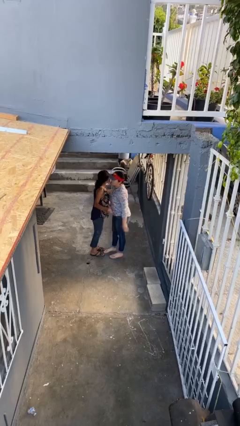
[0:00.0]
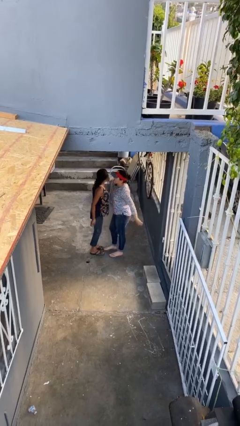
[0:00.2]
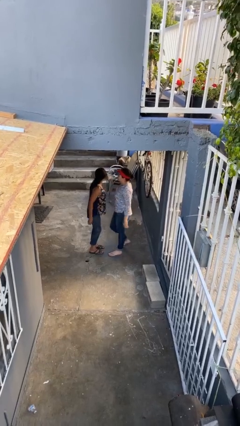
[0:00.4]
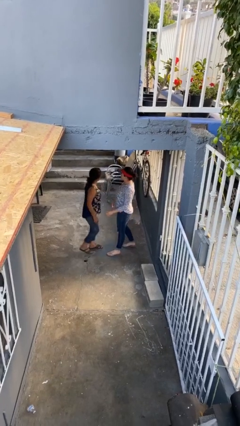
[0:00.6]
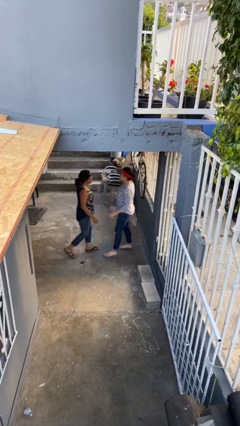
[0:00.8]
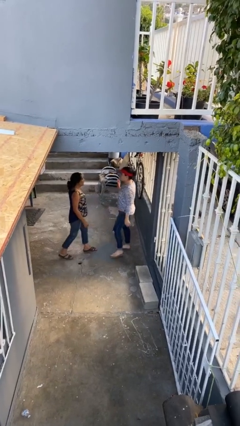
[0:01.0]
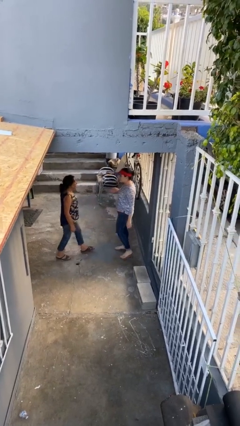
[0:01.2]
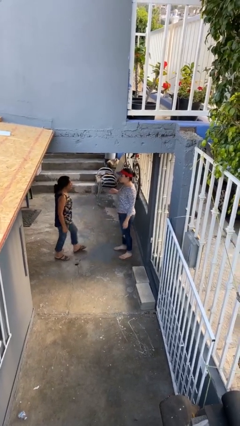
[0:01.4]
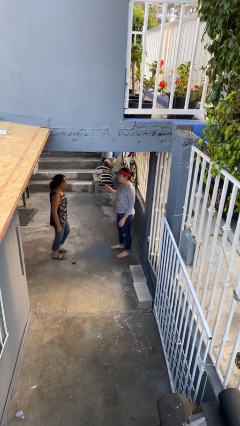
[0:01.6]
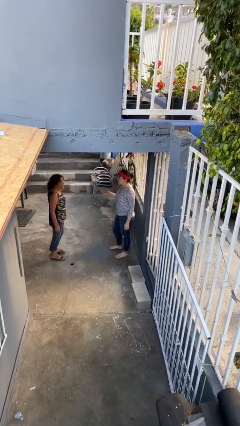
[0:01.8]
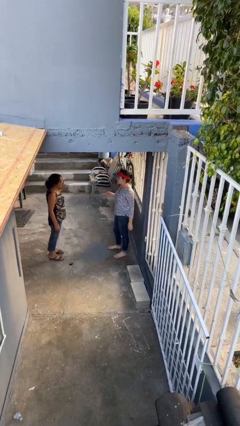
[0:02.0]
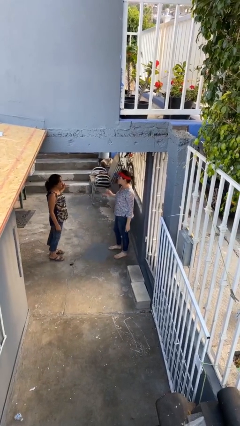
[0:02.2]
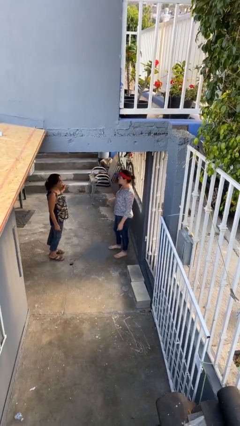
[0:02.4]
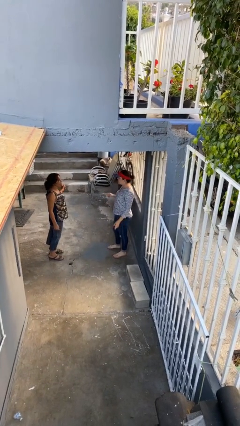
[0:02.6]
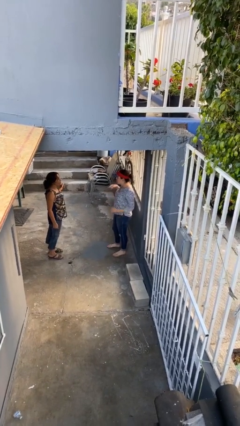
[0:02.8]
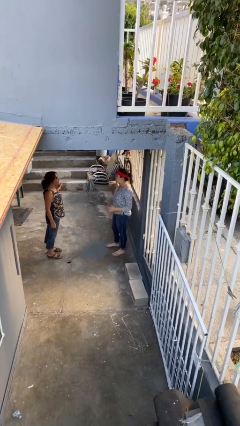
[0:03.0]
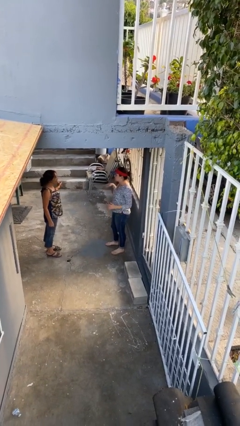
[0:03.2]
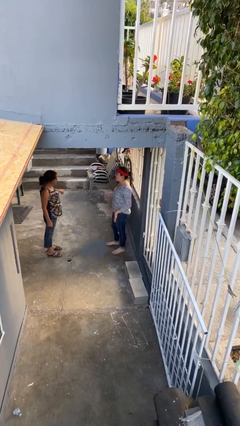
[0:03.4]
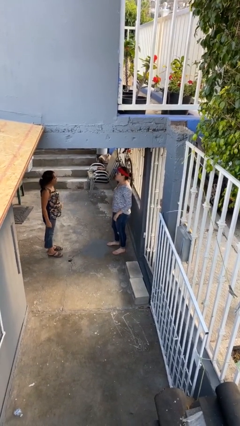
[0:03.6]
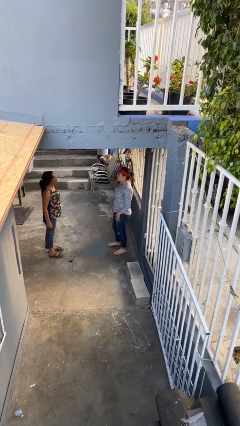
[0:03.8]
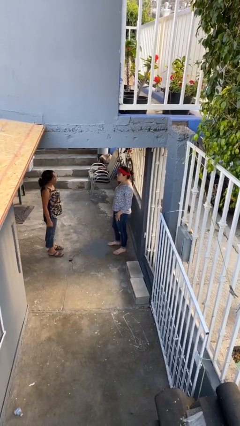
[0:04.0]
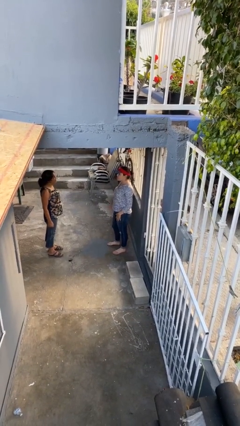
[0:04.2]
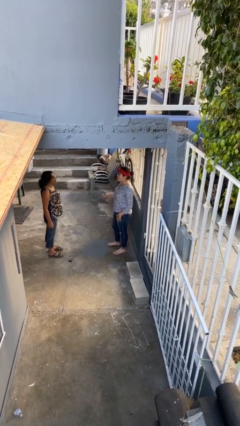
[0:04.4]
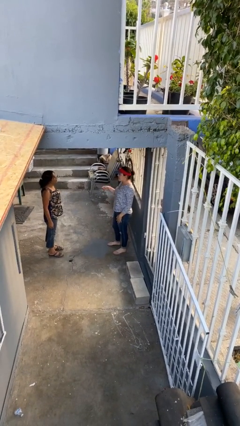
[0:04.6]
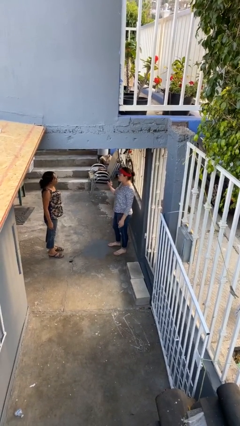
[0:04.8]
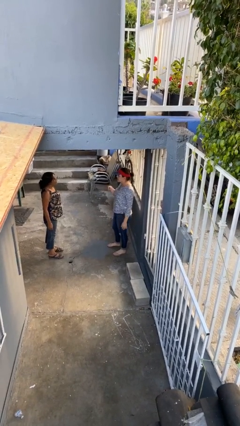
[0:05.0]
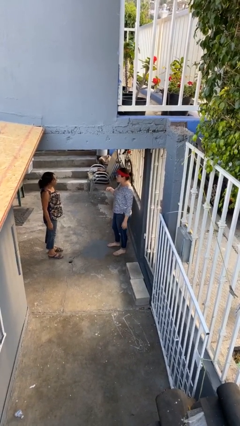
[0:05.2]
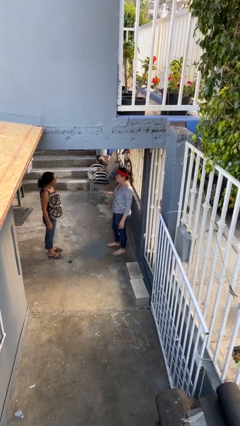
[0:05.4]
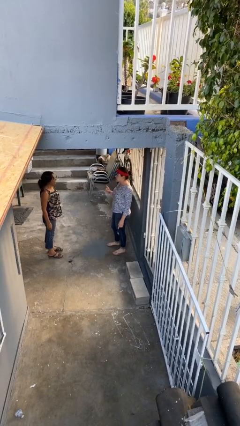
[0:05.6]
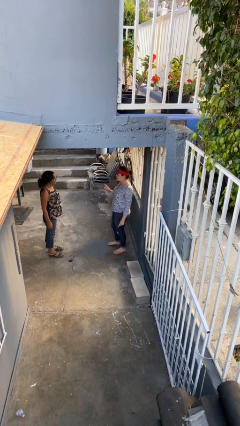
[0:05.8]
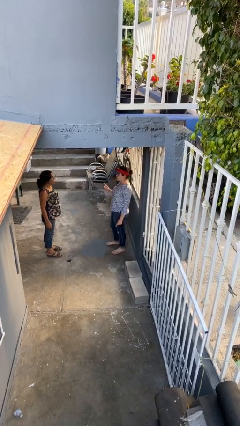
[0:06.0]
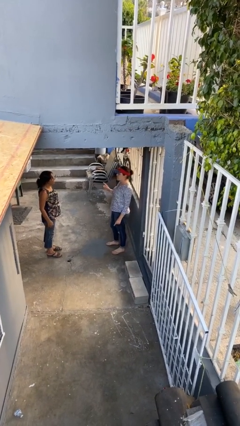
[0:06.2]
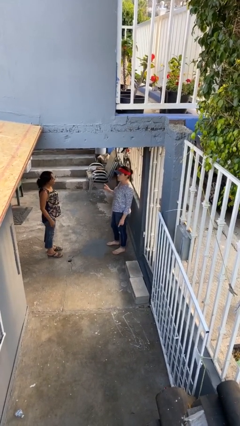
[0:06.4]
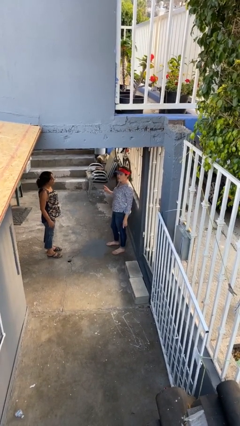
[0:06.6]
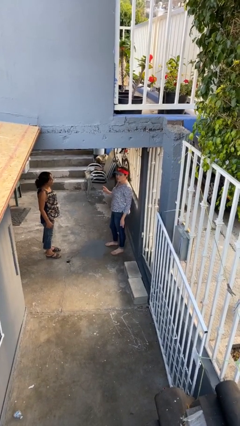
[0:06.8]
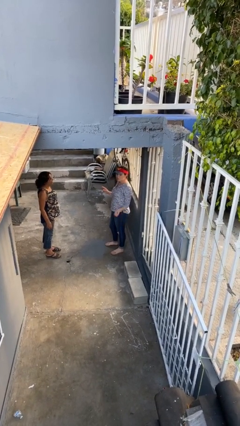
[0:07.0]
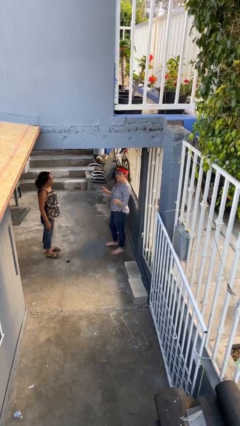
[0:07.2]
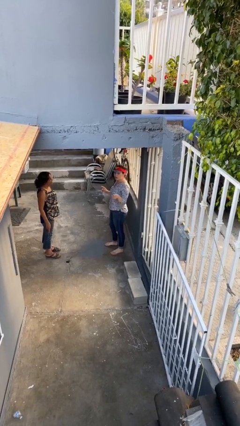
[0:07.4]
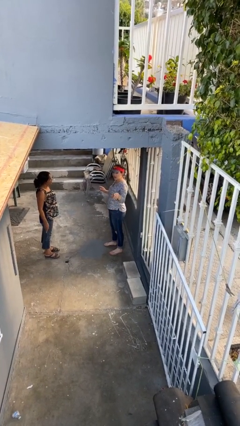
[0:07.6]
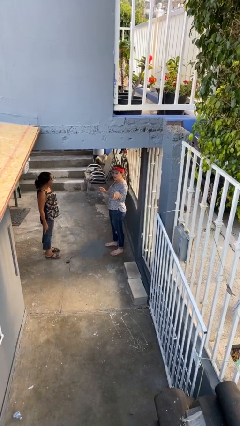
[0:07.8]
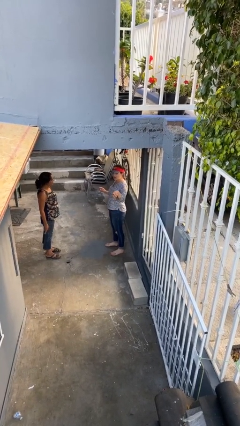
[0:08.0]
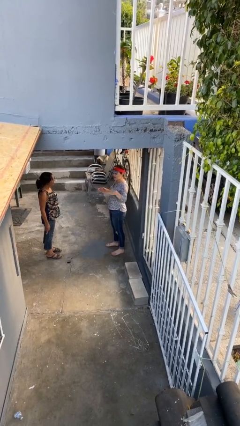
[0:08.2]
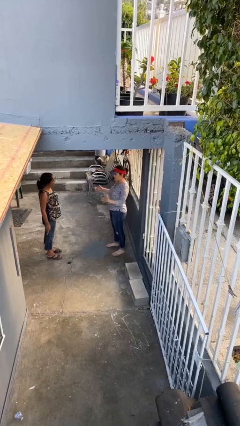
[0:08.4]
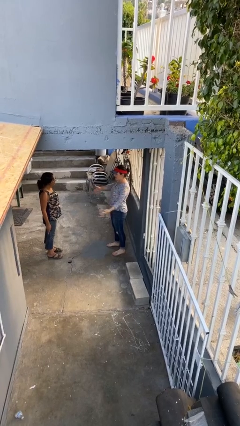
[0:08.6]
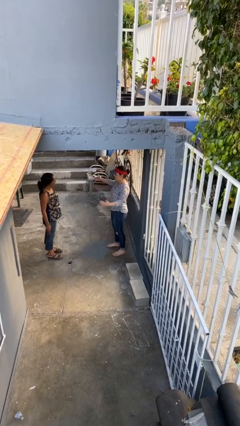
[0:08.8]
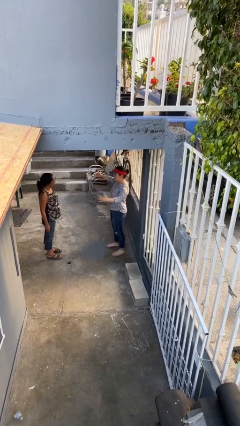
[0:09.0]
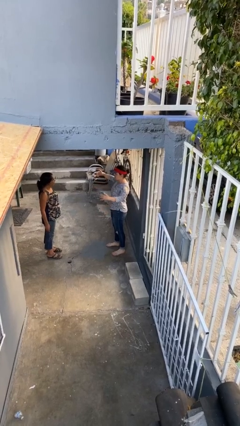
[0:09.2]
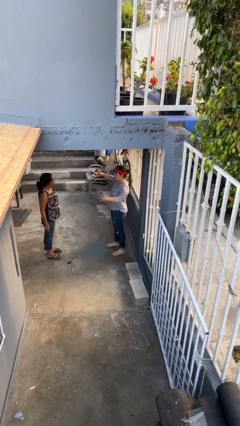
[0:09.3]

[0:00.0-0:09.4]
person talks to person

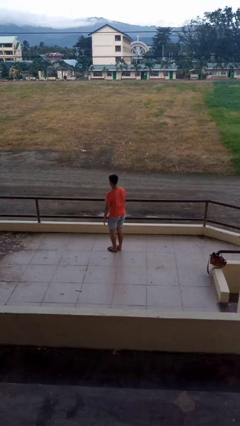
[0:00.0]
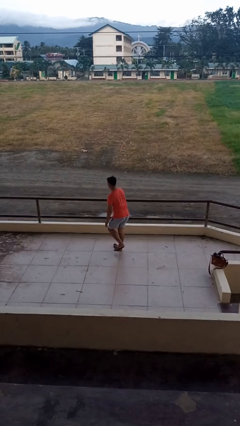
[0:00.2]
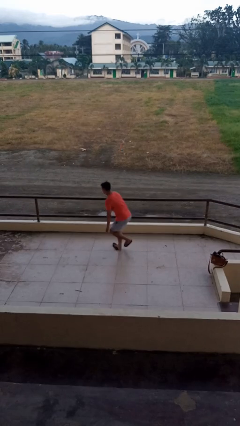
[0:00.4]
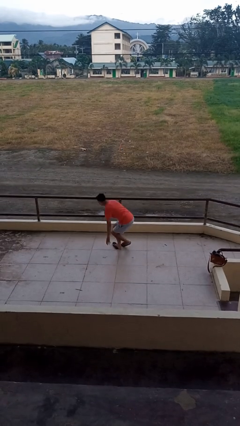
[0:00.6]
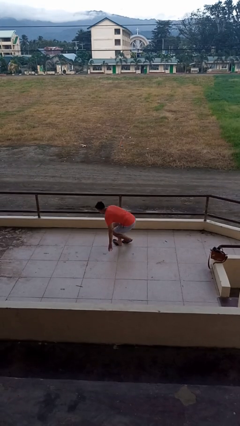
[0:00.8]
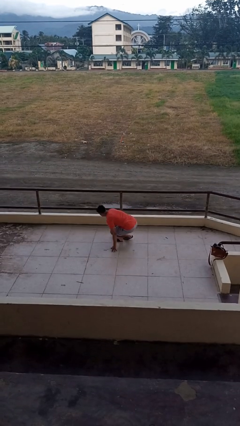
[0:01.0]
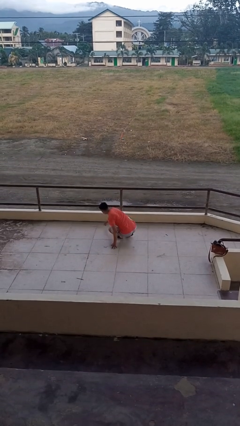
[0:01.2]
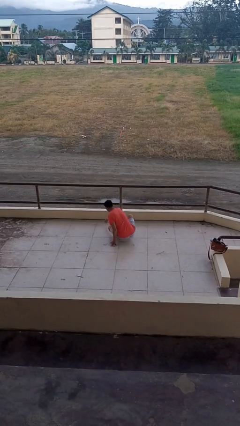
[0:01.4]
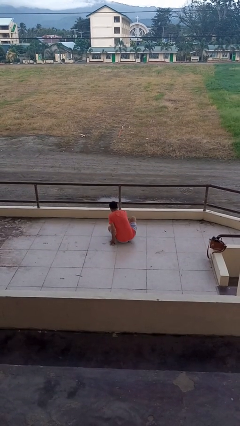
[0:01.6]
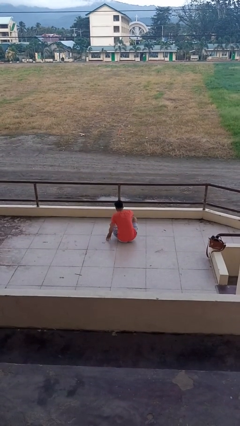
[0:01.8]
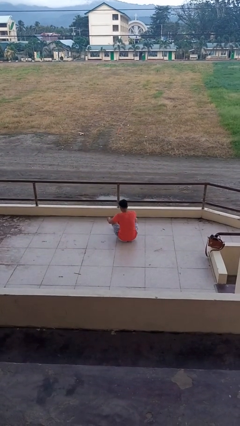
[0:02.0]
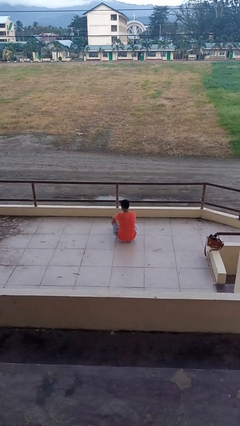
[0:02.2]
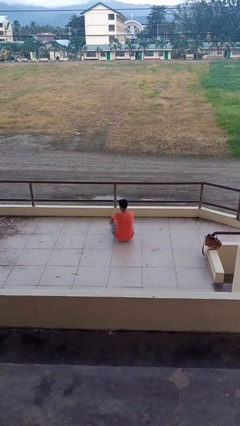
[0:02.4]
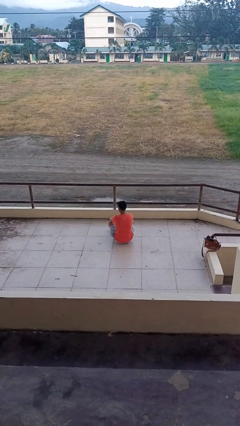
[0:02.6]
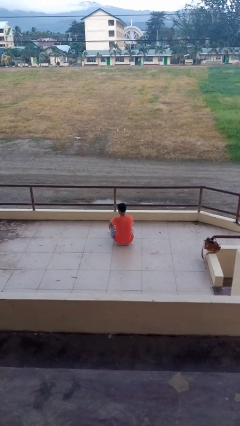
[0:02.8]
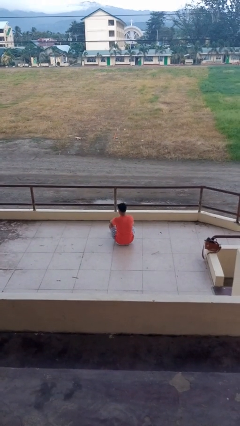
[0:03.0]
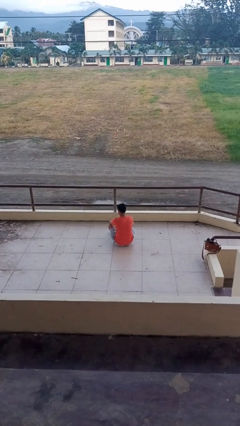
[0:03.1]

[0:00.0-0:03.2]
person sits crisscross

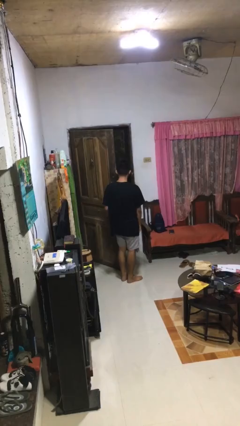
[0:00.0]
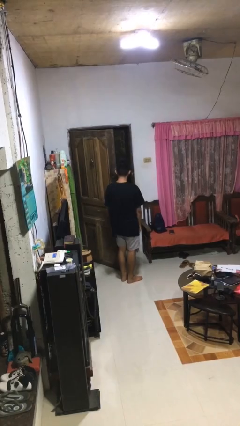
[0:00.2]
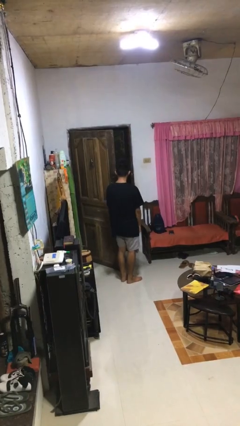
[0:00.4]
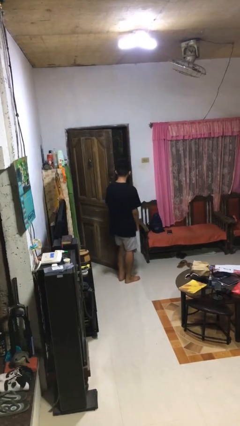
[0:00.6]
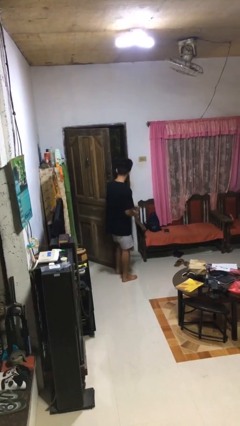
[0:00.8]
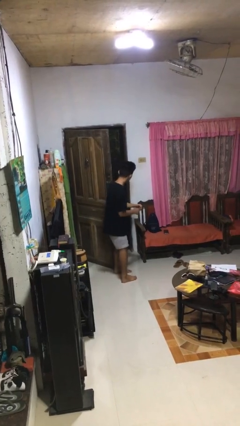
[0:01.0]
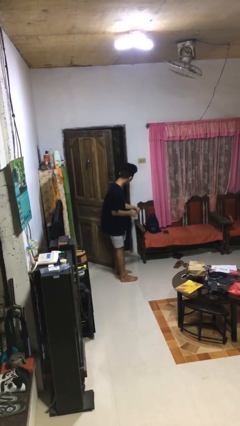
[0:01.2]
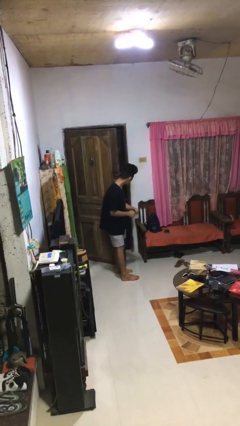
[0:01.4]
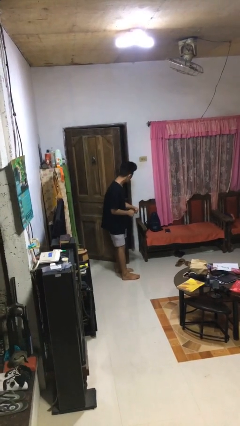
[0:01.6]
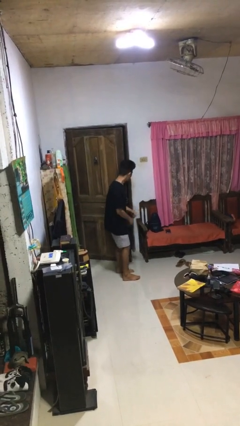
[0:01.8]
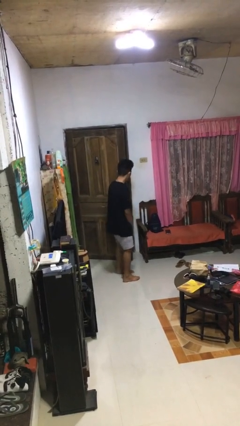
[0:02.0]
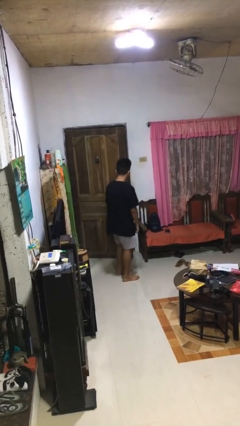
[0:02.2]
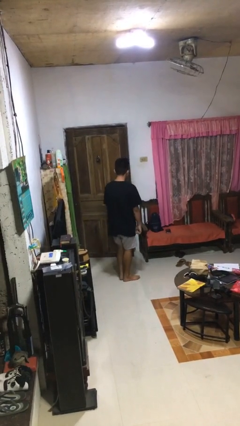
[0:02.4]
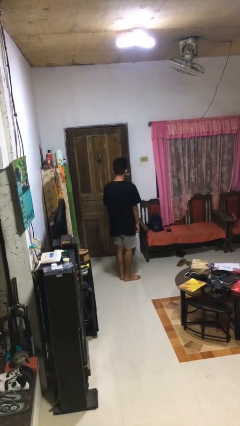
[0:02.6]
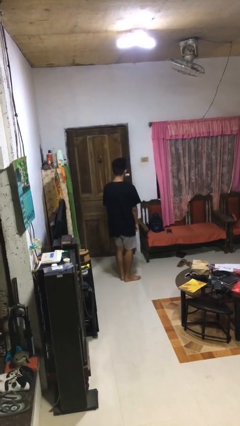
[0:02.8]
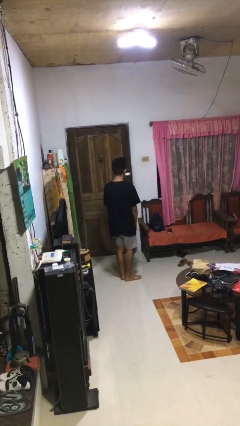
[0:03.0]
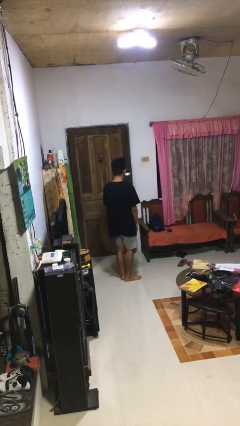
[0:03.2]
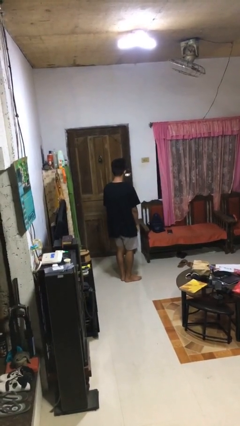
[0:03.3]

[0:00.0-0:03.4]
person closes door with hip

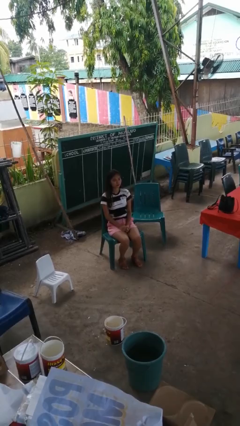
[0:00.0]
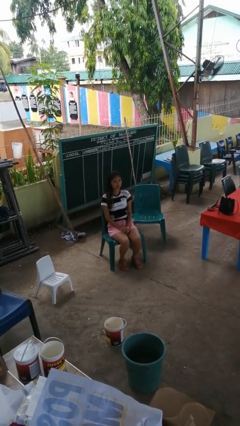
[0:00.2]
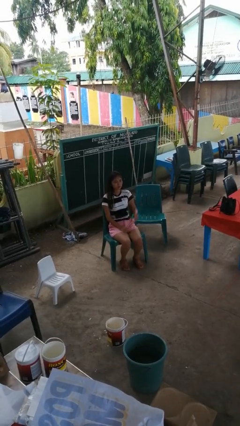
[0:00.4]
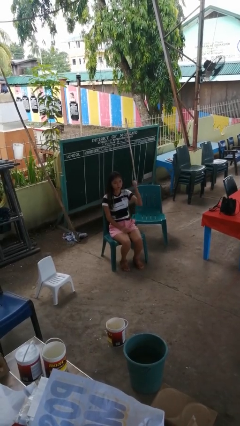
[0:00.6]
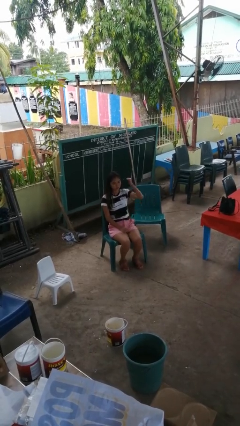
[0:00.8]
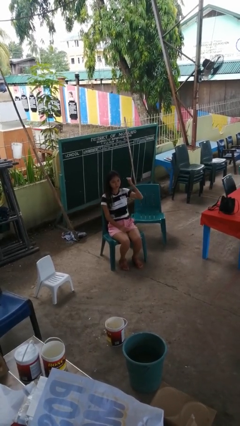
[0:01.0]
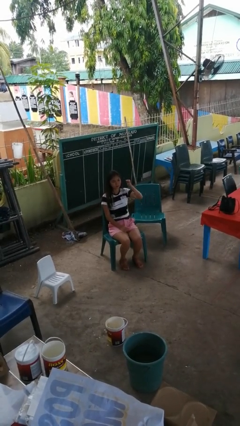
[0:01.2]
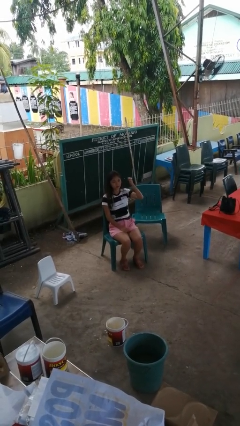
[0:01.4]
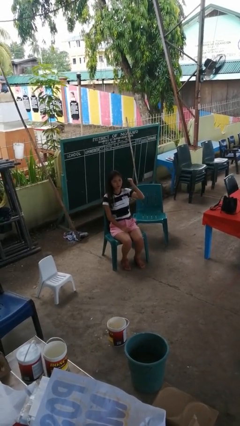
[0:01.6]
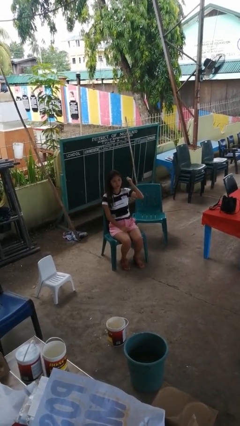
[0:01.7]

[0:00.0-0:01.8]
person gestures behind me
